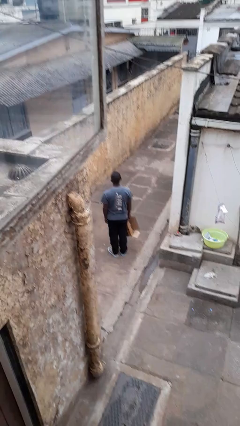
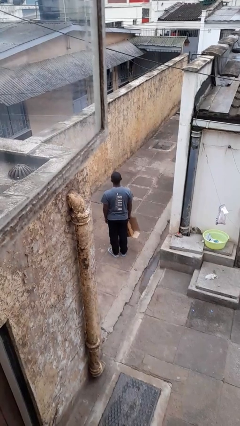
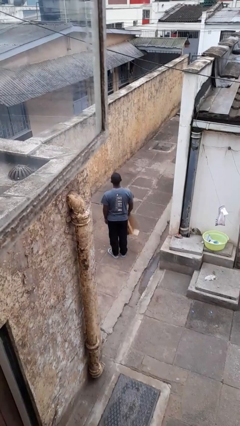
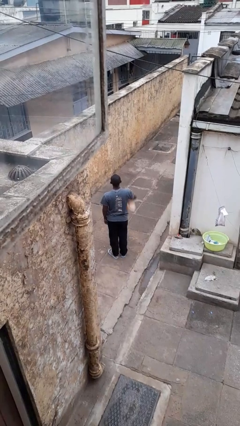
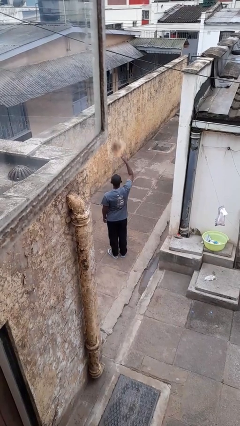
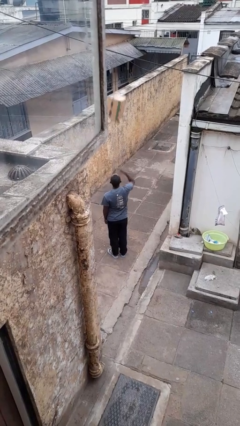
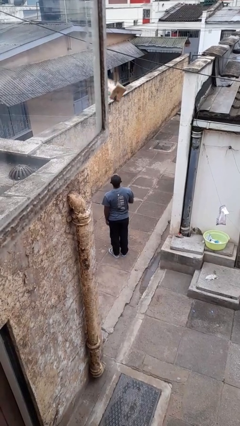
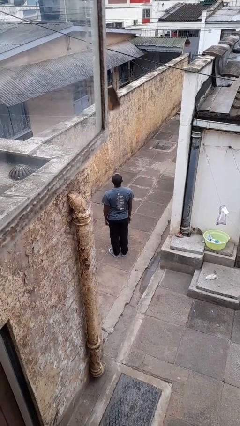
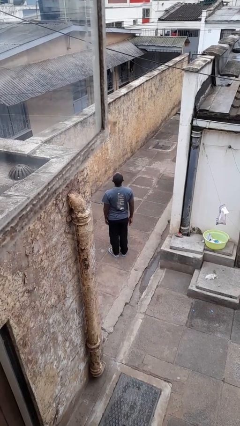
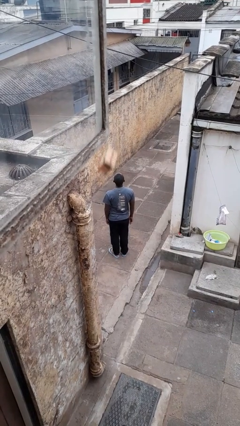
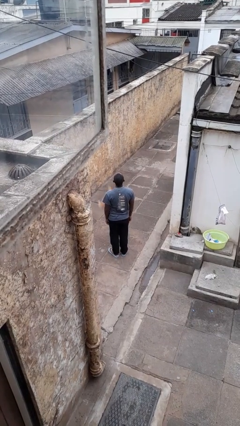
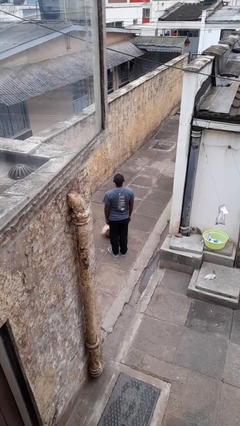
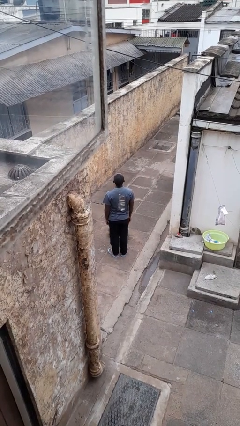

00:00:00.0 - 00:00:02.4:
person throws object into air

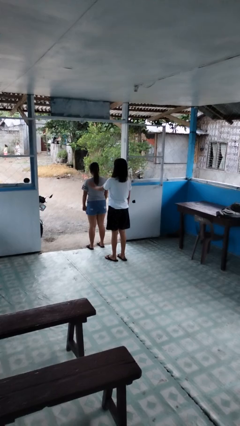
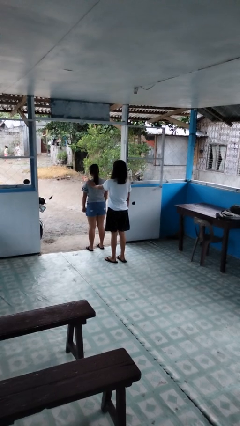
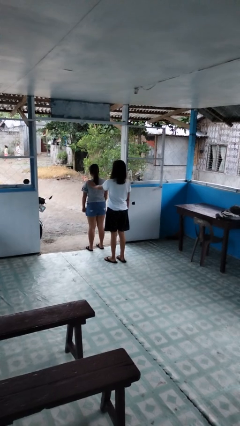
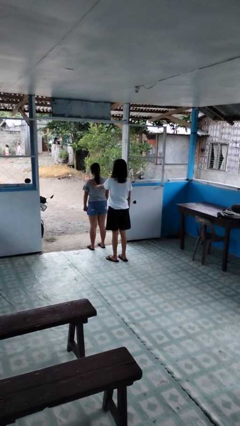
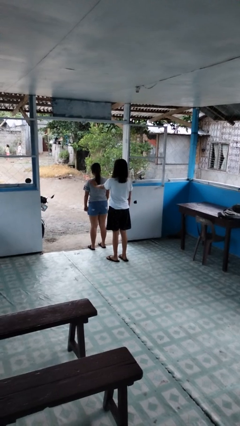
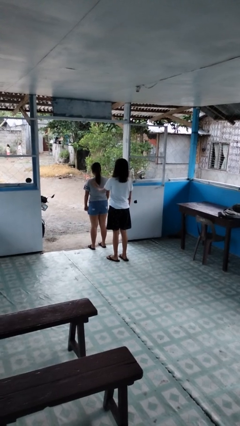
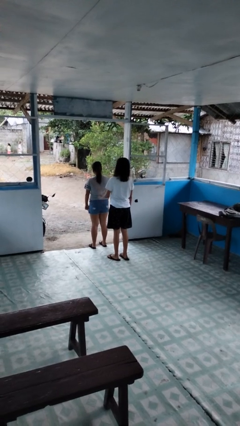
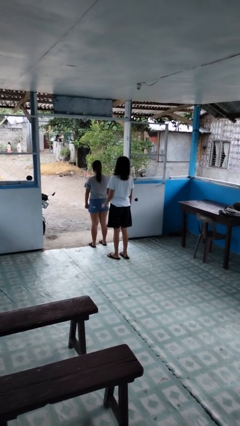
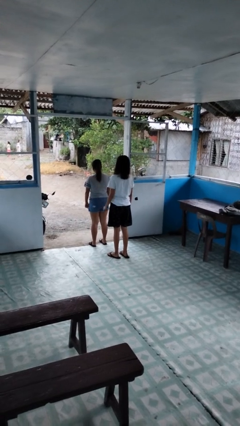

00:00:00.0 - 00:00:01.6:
person touches back of person

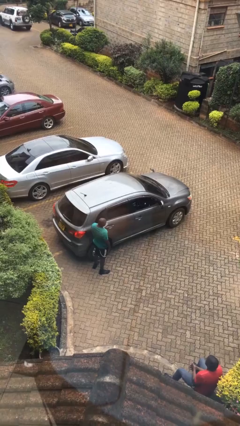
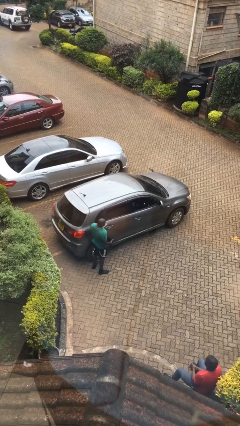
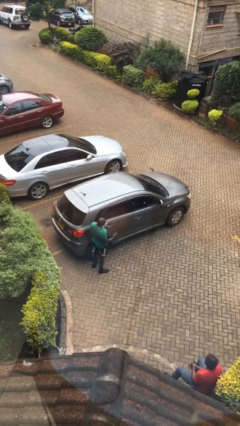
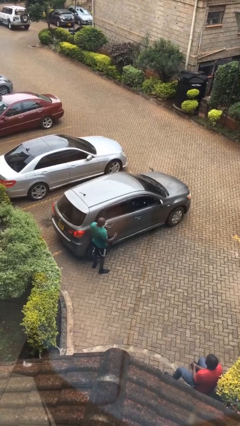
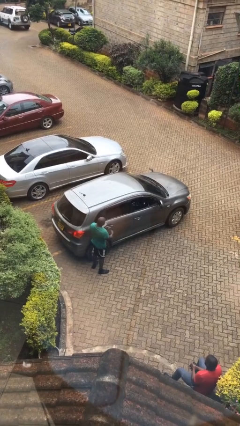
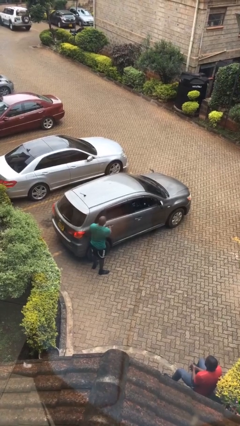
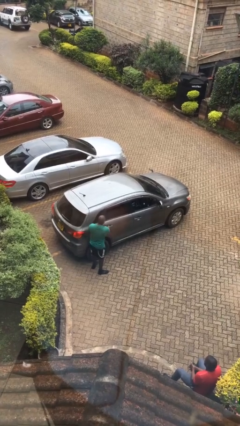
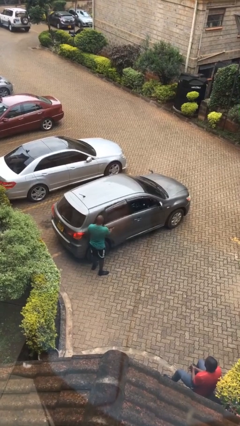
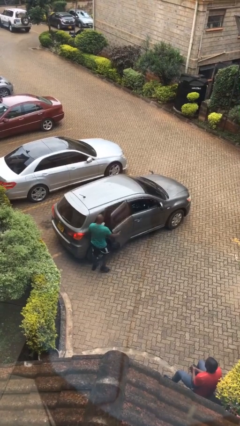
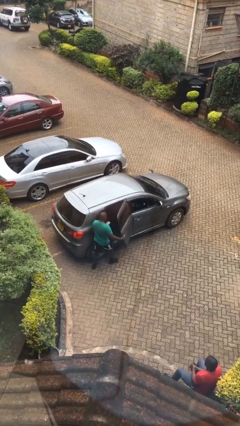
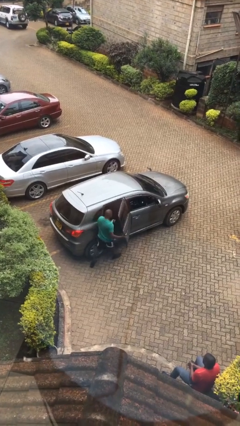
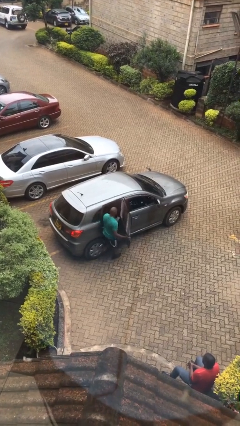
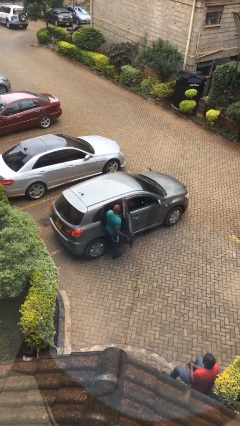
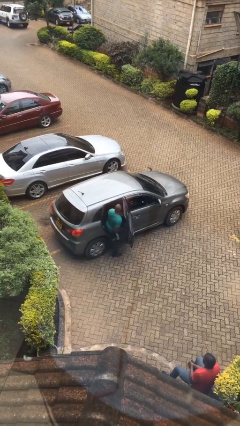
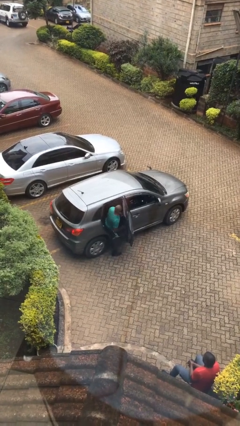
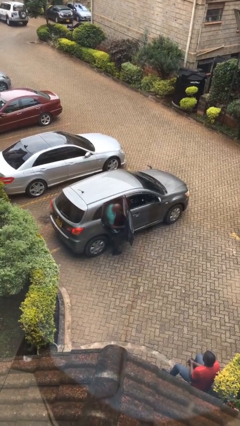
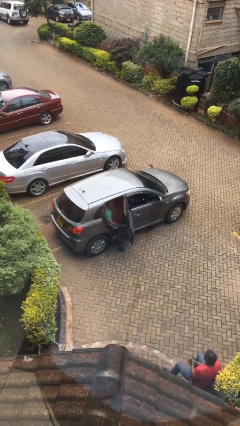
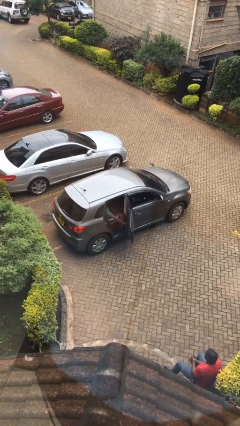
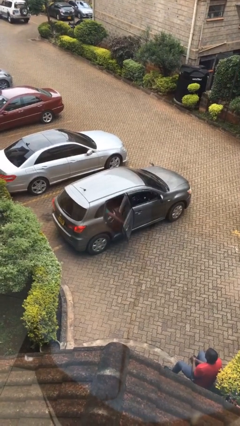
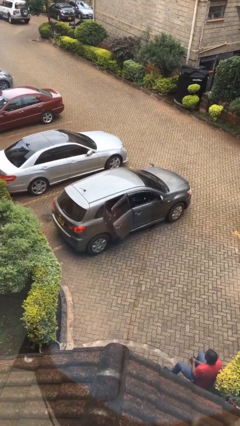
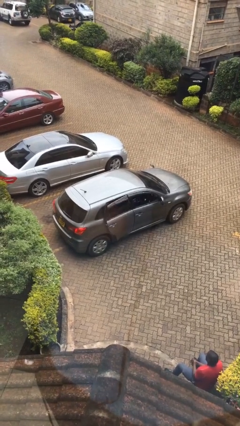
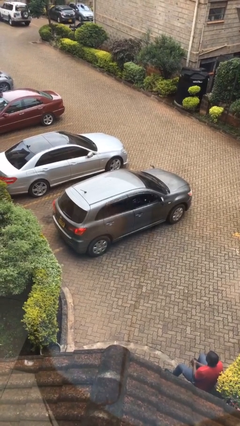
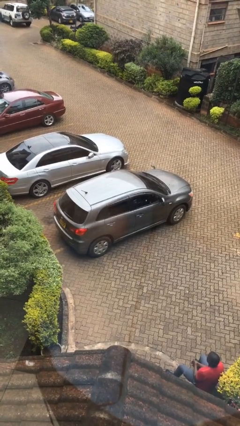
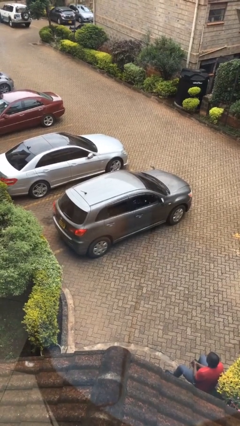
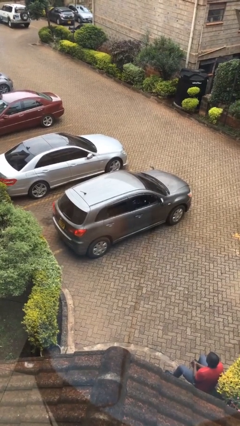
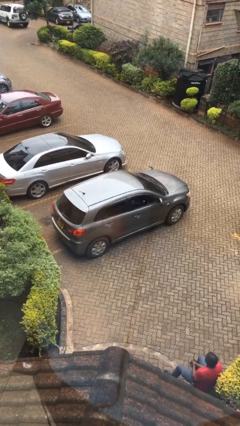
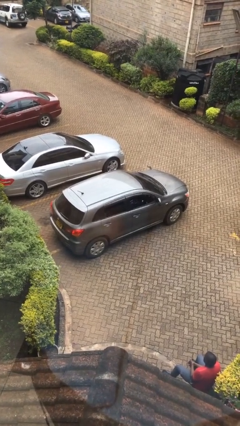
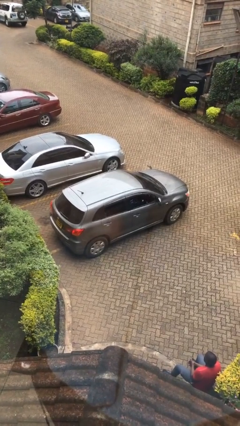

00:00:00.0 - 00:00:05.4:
car picks up person

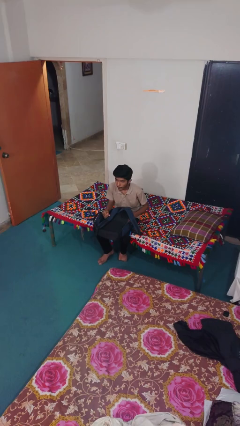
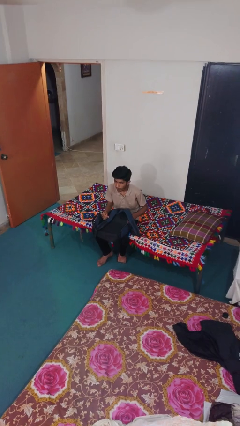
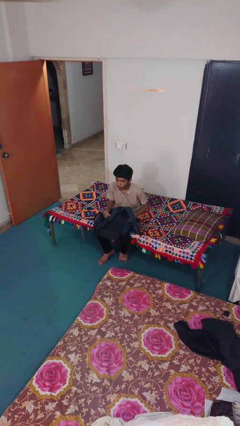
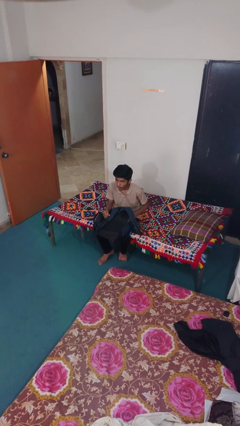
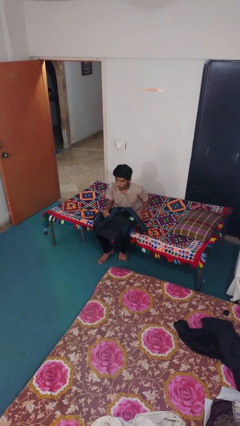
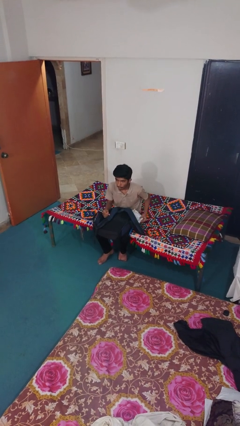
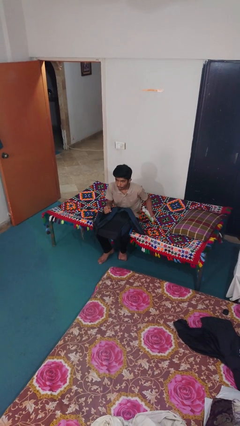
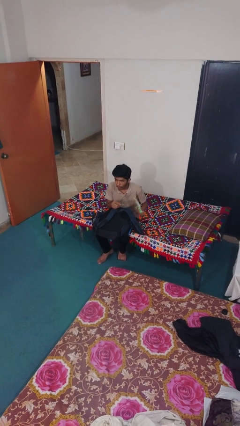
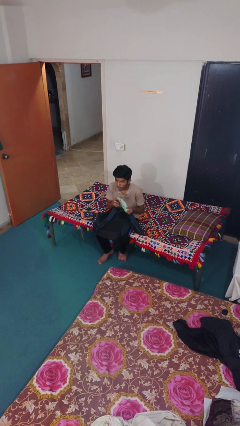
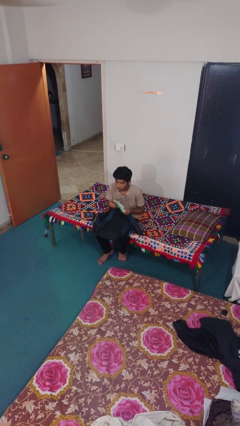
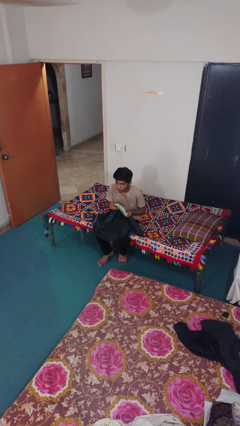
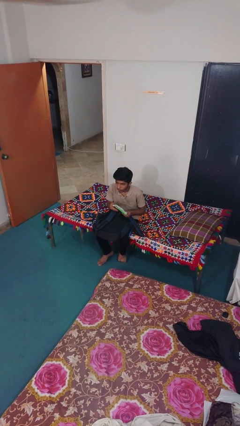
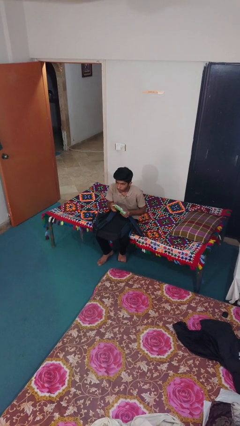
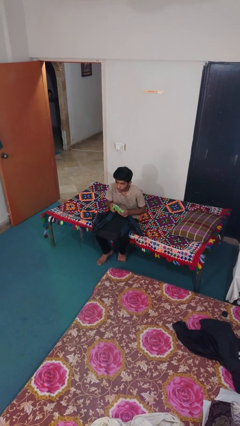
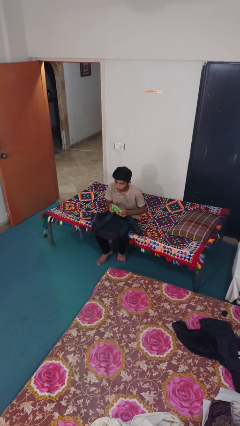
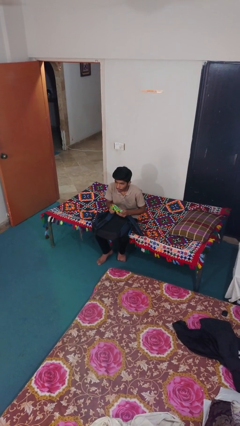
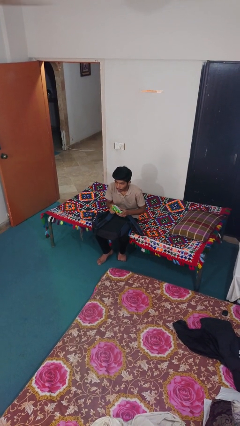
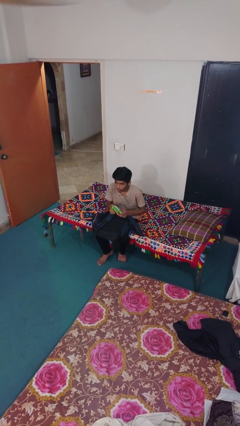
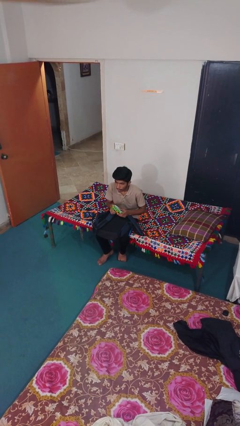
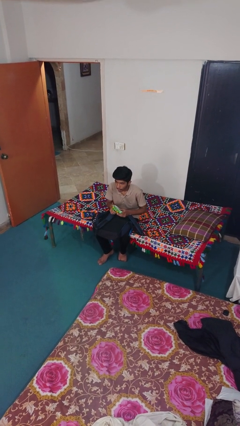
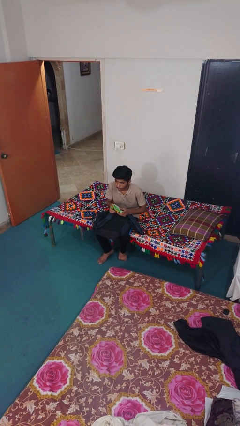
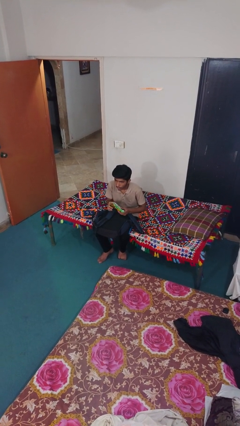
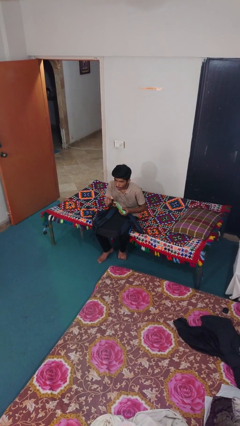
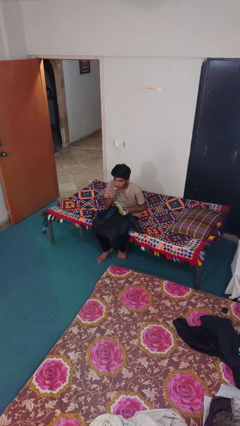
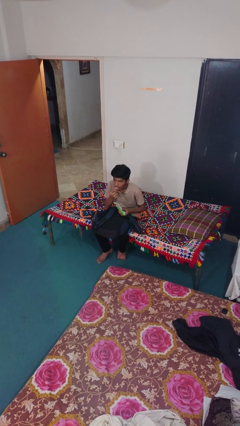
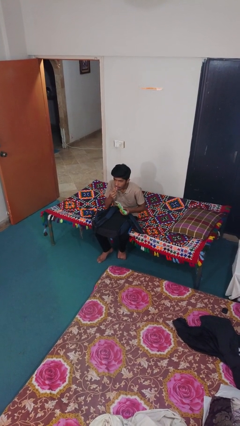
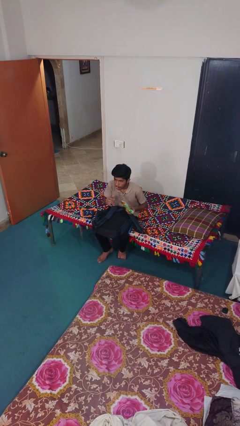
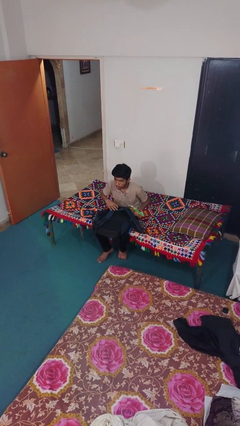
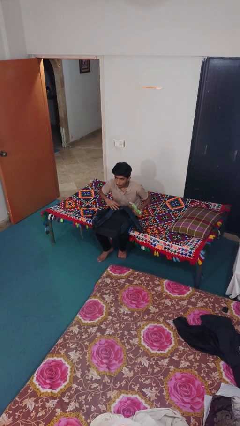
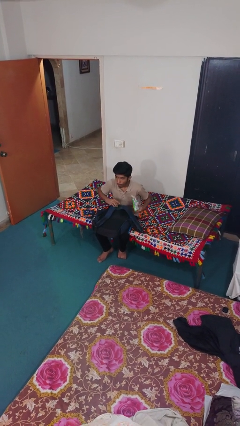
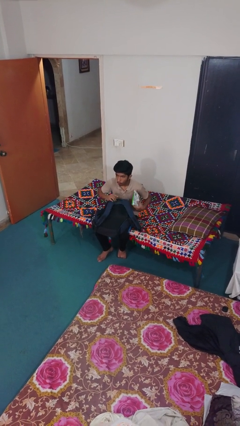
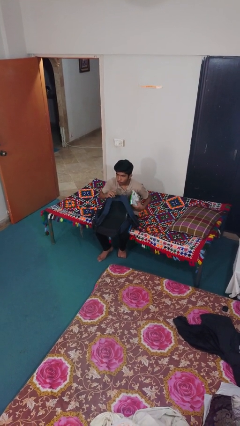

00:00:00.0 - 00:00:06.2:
person eats snack from bag

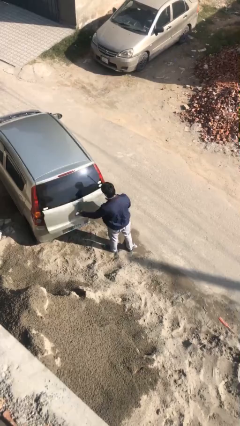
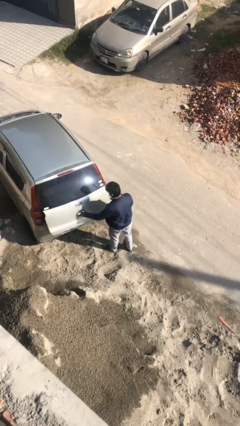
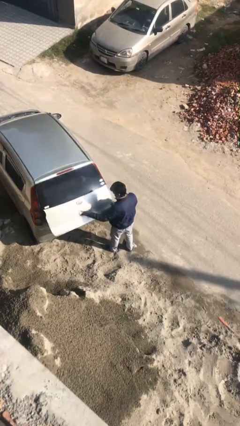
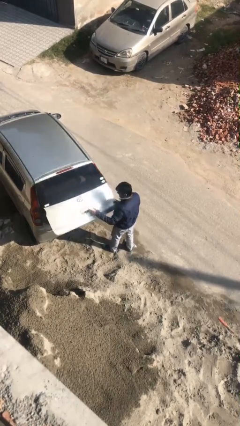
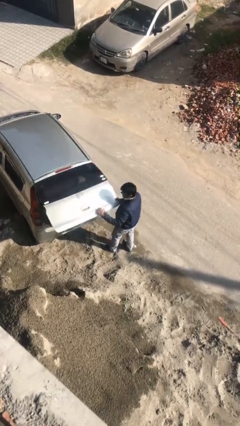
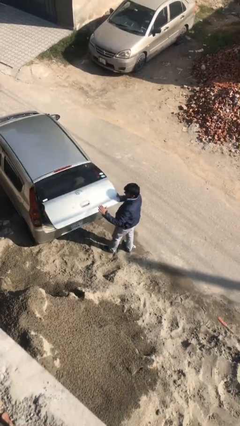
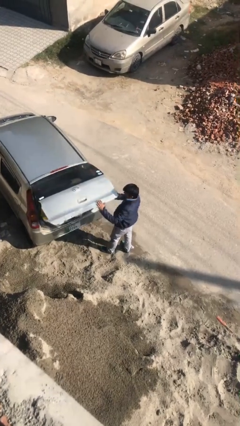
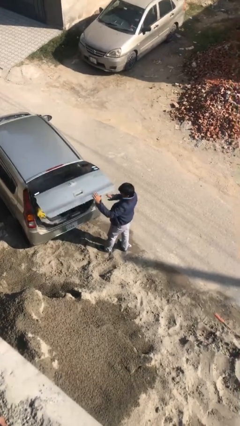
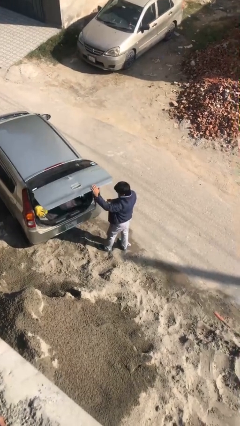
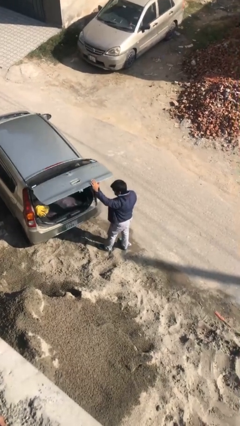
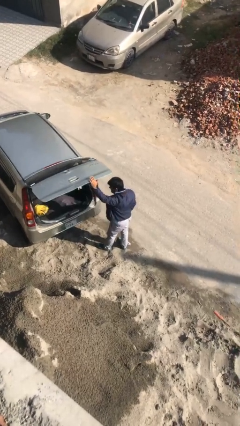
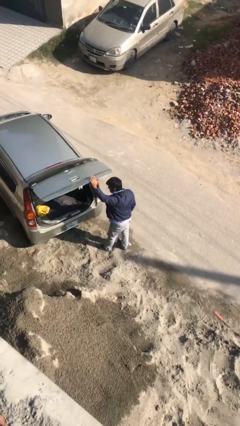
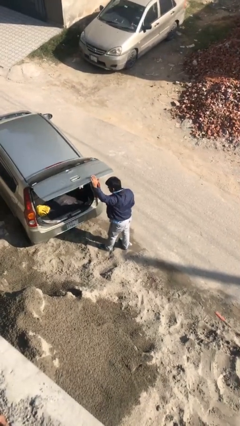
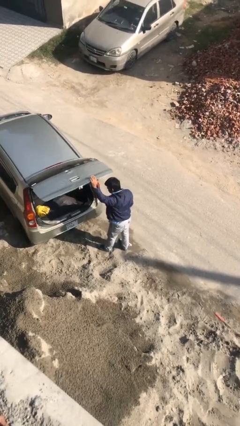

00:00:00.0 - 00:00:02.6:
person opens car trunk
